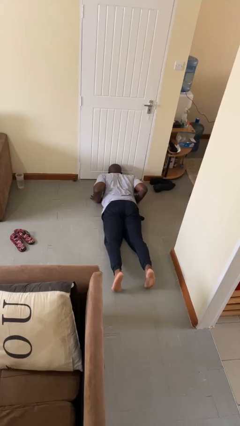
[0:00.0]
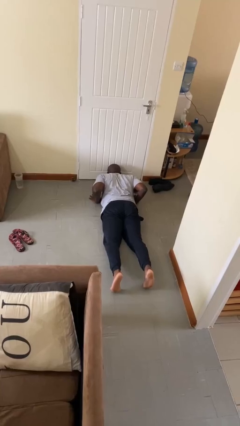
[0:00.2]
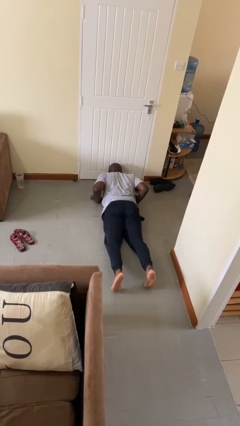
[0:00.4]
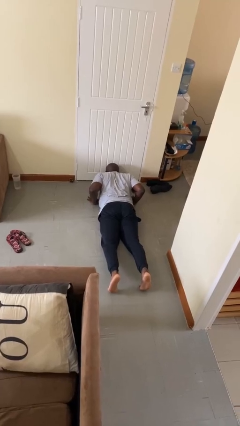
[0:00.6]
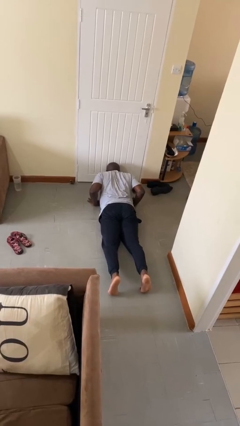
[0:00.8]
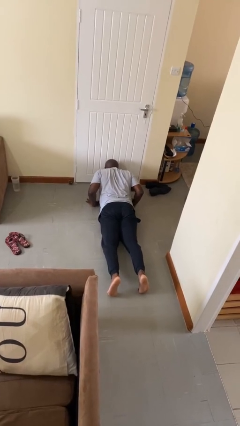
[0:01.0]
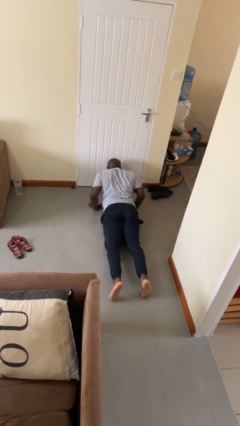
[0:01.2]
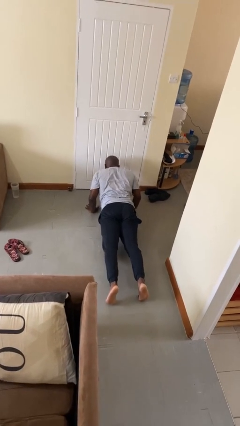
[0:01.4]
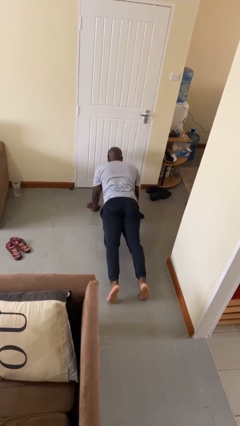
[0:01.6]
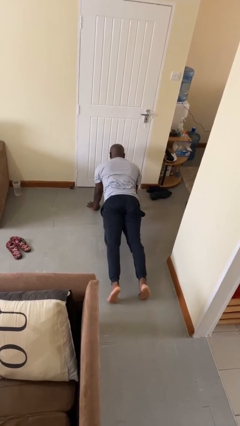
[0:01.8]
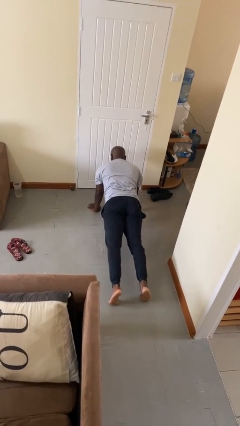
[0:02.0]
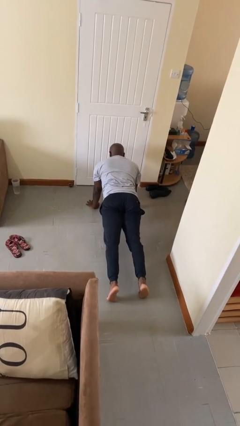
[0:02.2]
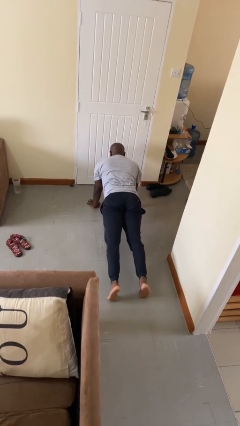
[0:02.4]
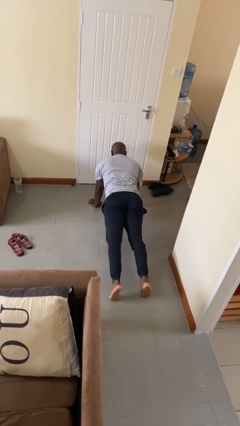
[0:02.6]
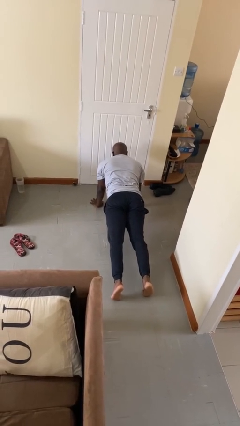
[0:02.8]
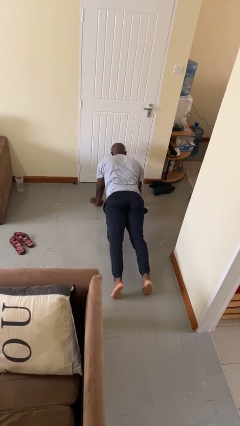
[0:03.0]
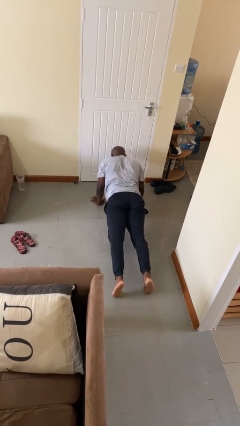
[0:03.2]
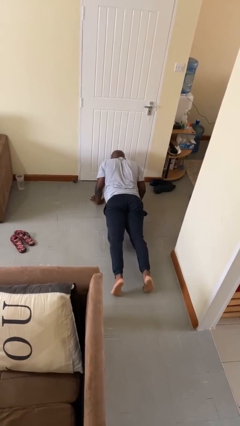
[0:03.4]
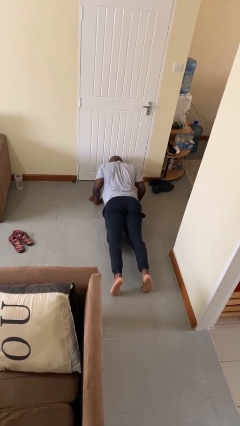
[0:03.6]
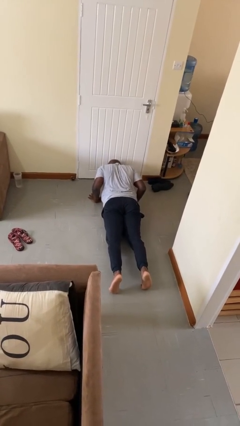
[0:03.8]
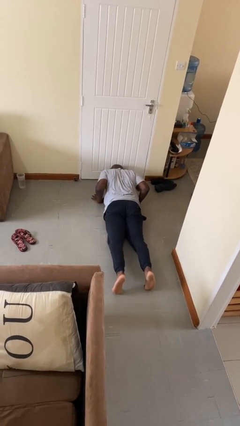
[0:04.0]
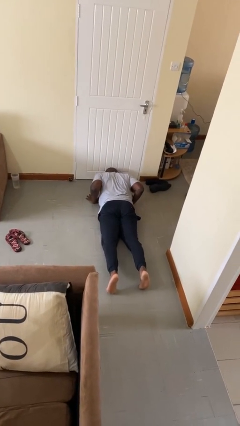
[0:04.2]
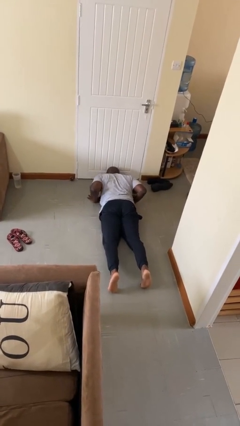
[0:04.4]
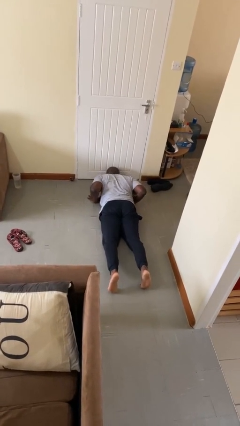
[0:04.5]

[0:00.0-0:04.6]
person exercises with pushup

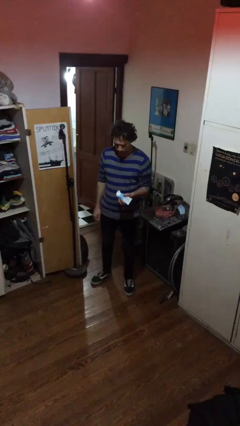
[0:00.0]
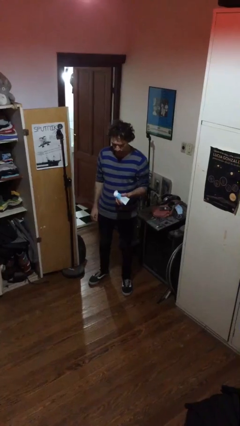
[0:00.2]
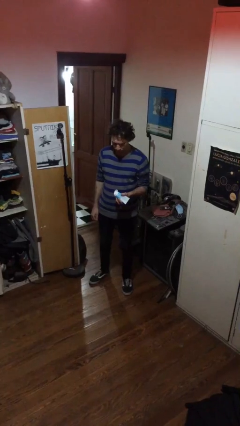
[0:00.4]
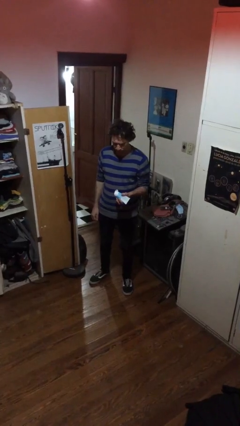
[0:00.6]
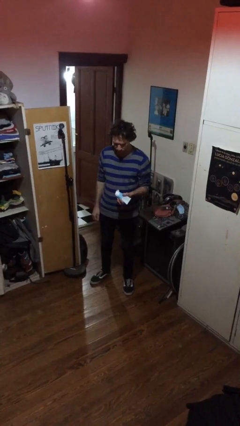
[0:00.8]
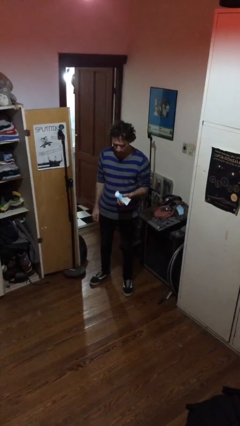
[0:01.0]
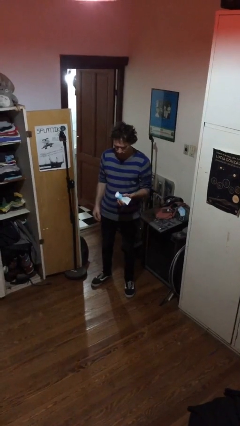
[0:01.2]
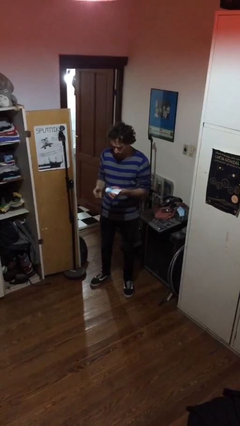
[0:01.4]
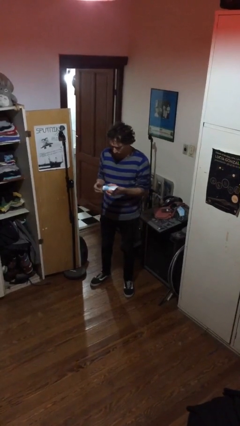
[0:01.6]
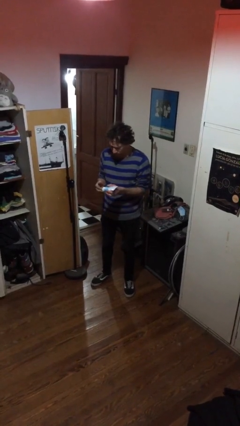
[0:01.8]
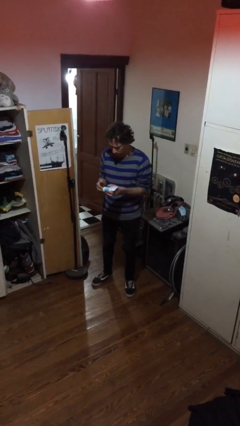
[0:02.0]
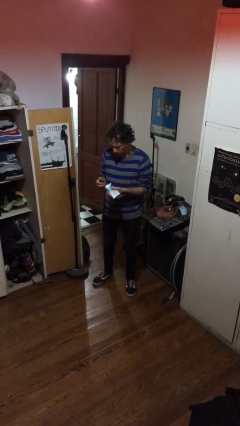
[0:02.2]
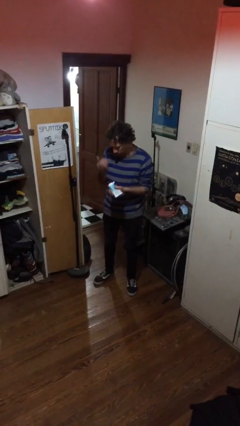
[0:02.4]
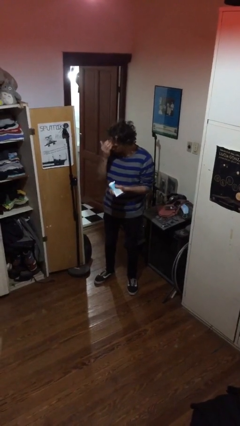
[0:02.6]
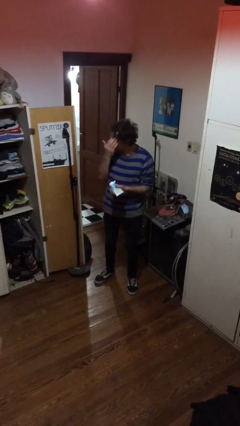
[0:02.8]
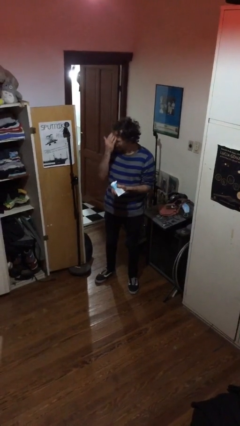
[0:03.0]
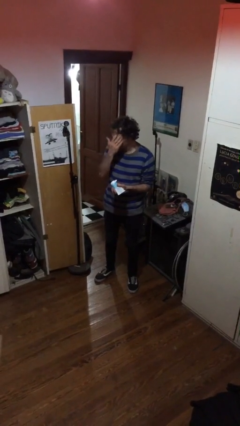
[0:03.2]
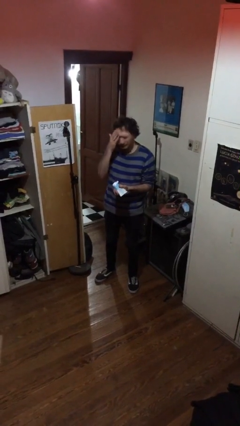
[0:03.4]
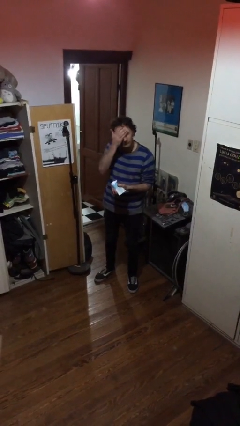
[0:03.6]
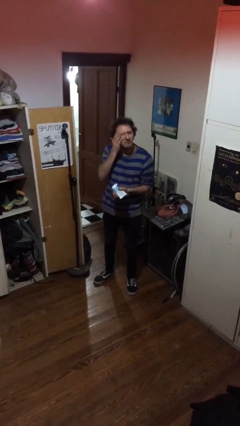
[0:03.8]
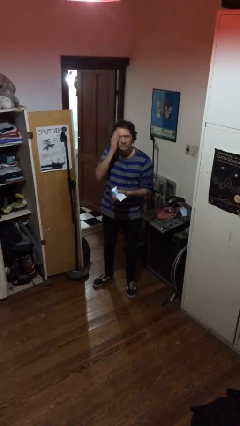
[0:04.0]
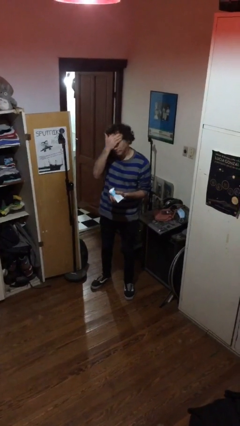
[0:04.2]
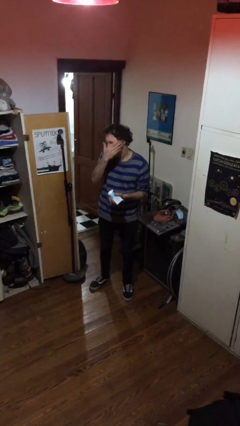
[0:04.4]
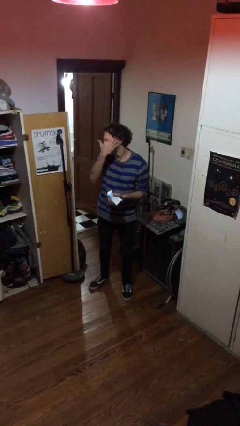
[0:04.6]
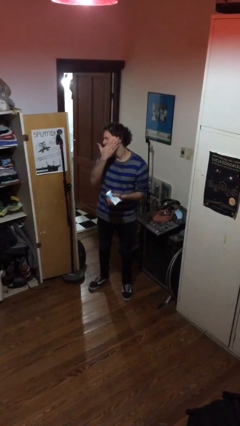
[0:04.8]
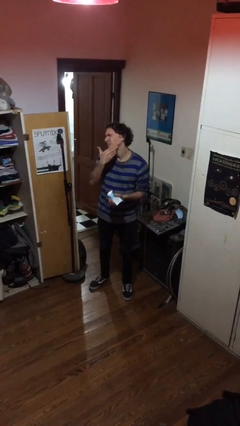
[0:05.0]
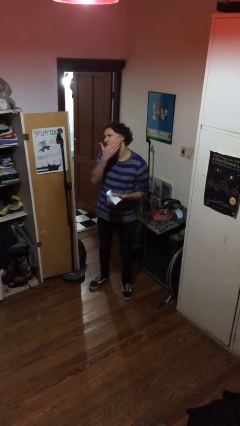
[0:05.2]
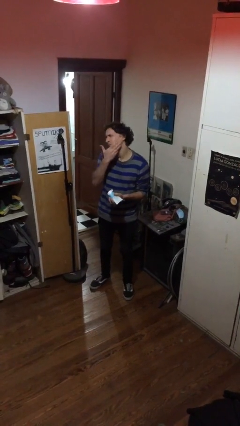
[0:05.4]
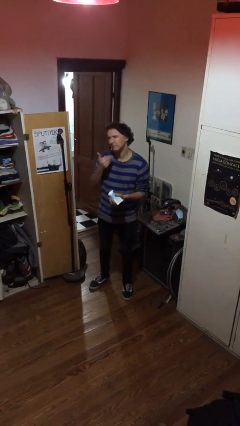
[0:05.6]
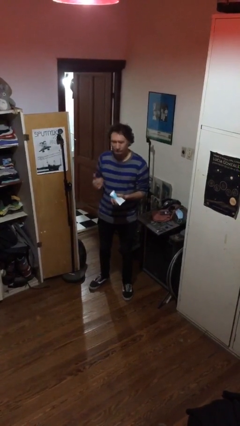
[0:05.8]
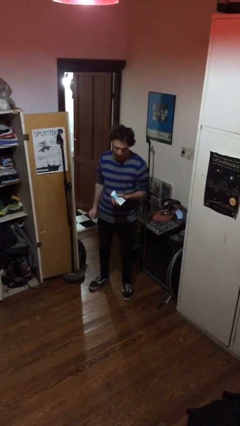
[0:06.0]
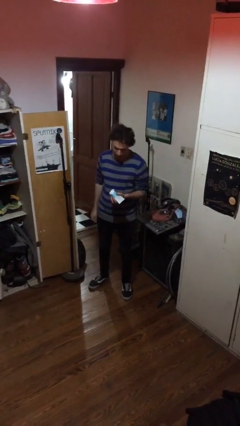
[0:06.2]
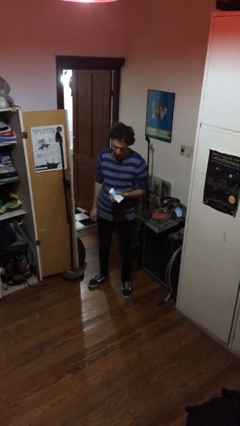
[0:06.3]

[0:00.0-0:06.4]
person applies sunscreen

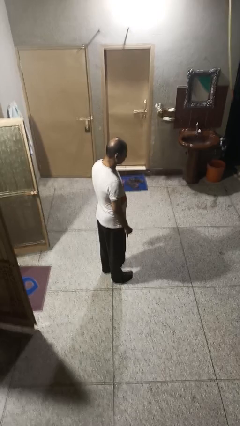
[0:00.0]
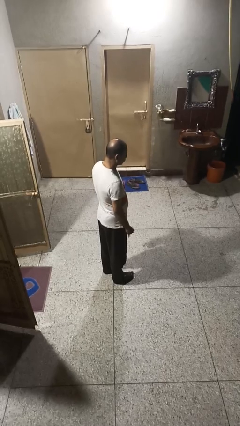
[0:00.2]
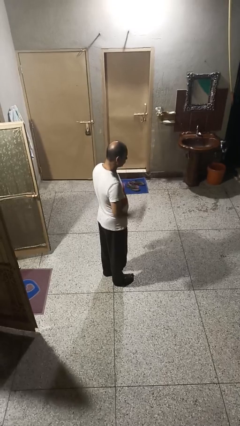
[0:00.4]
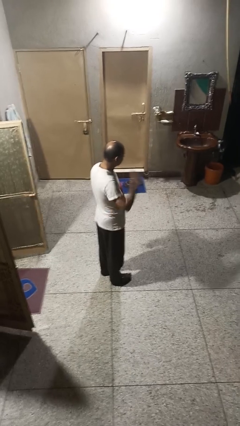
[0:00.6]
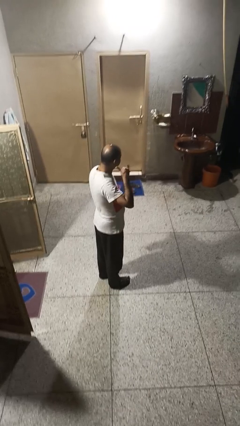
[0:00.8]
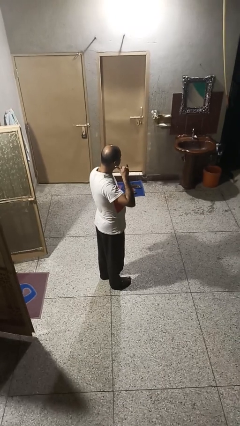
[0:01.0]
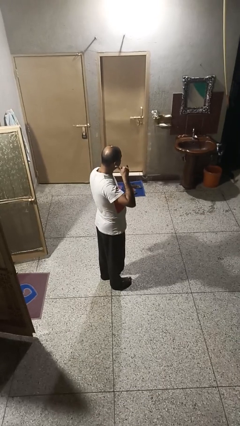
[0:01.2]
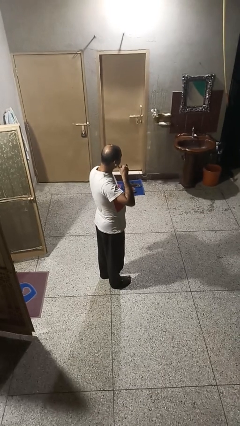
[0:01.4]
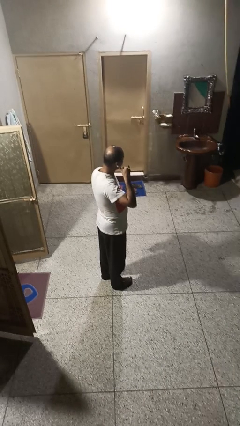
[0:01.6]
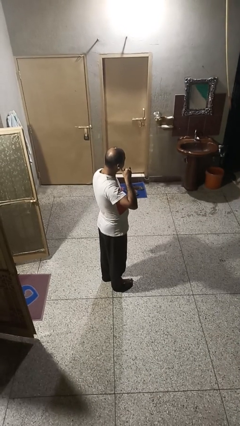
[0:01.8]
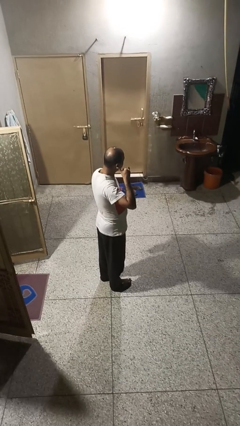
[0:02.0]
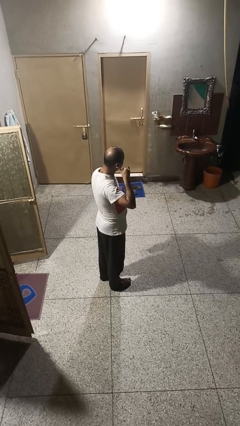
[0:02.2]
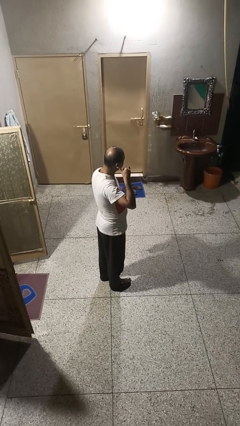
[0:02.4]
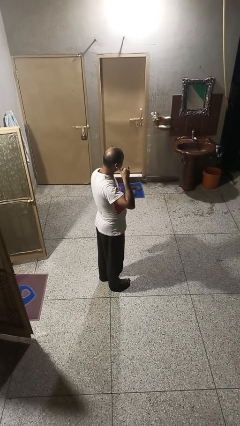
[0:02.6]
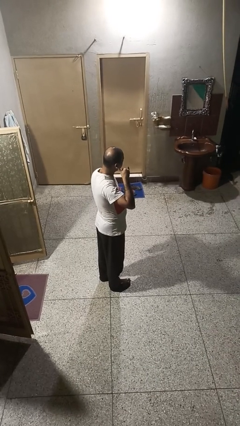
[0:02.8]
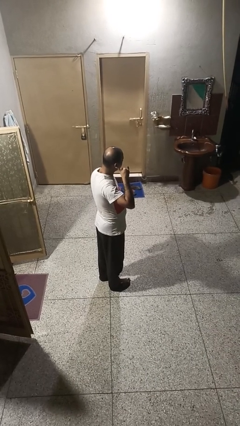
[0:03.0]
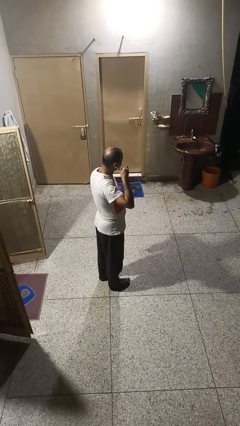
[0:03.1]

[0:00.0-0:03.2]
person gestures call me

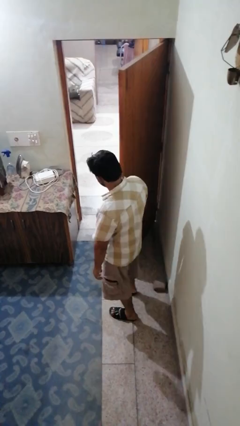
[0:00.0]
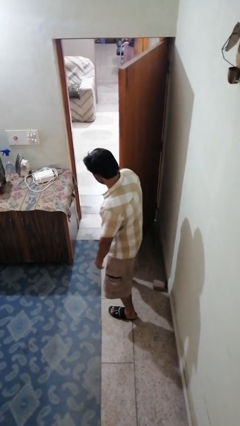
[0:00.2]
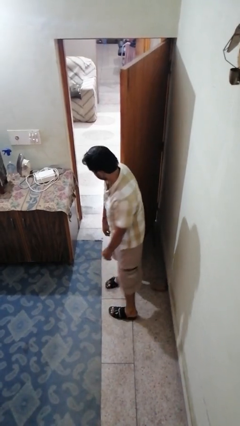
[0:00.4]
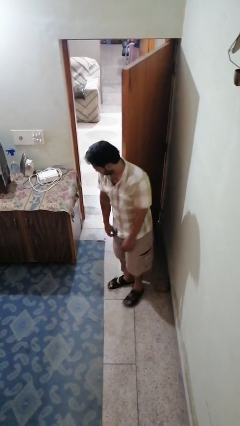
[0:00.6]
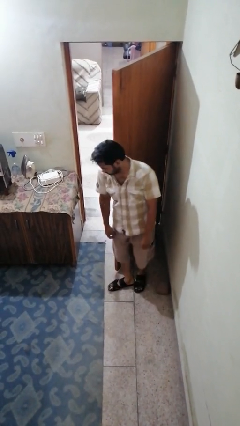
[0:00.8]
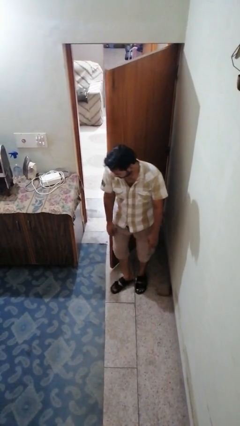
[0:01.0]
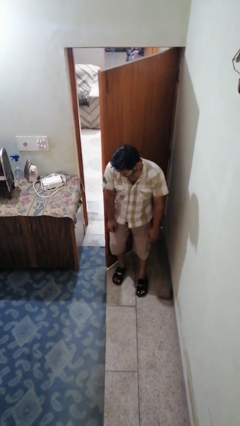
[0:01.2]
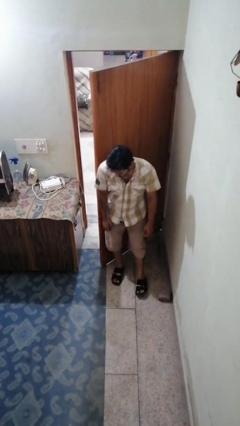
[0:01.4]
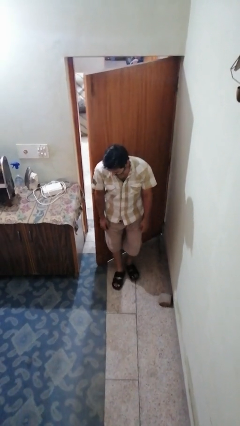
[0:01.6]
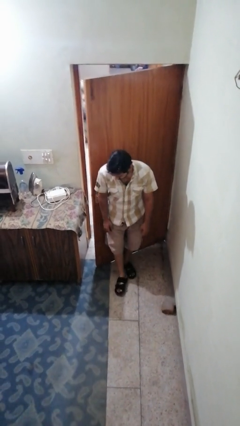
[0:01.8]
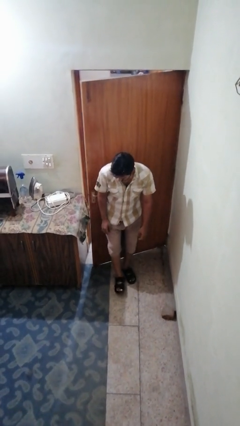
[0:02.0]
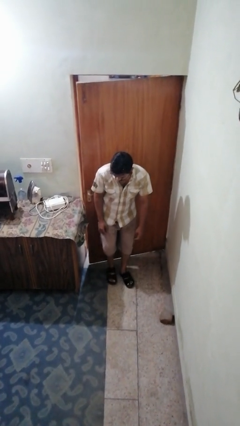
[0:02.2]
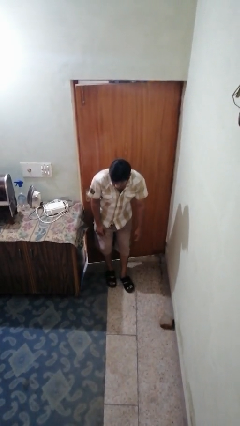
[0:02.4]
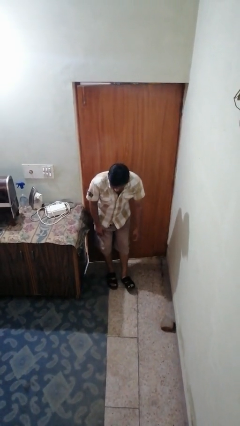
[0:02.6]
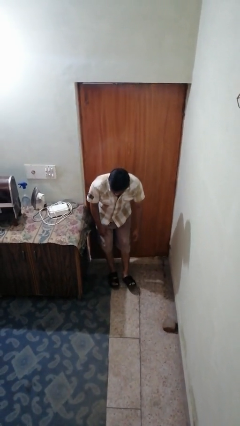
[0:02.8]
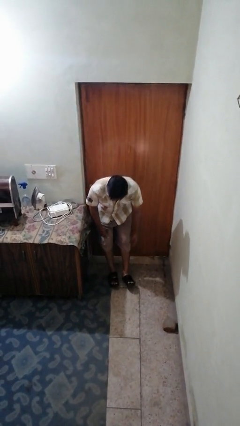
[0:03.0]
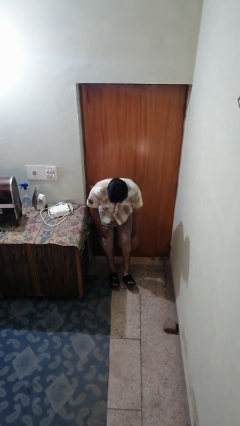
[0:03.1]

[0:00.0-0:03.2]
person closes door with hip

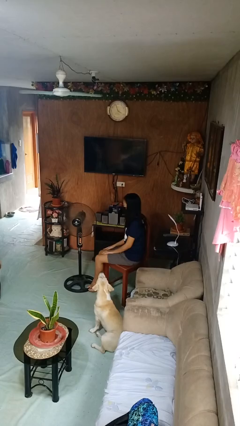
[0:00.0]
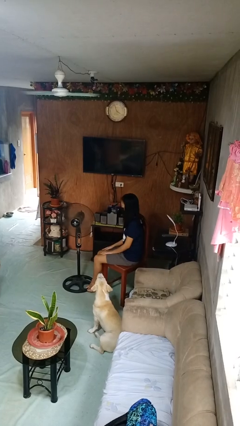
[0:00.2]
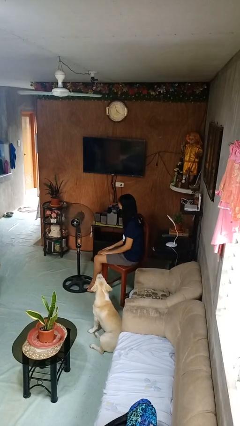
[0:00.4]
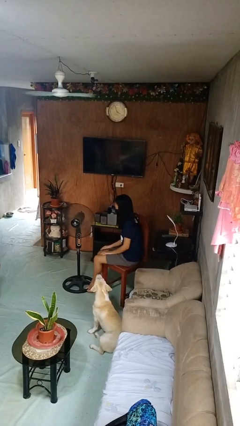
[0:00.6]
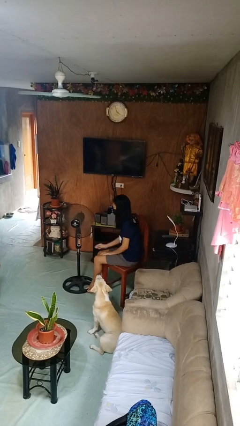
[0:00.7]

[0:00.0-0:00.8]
person turns off fan
